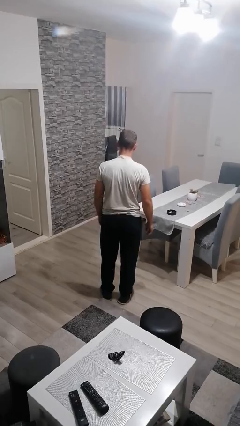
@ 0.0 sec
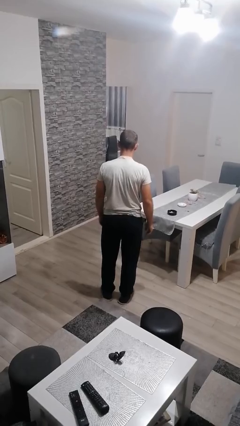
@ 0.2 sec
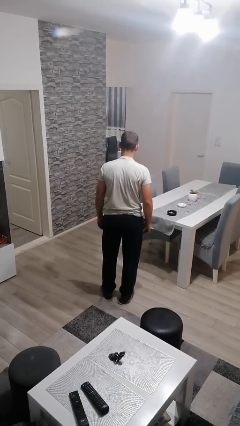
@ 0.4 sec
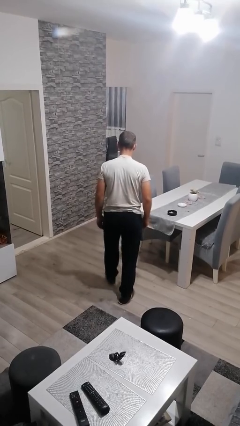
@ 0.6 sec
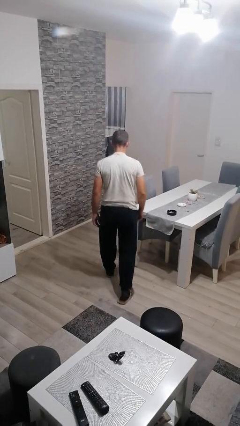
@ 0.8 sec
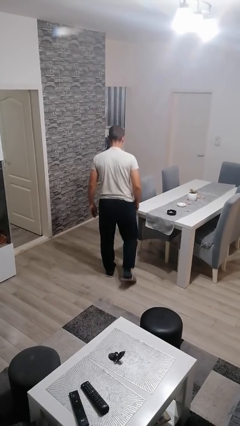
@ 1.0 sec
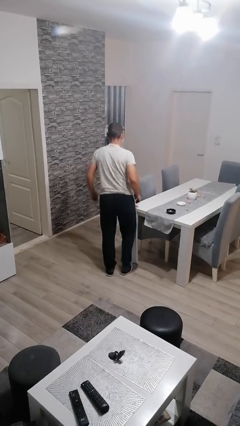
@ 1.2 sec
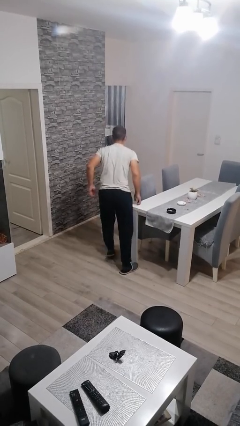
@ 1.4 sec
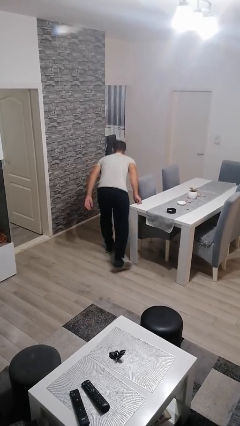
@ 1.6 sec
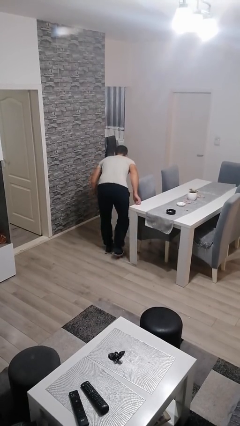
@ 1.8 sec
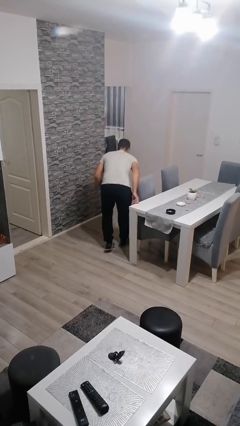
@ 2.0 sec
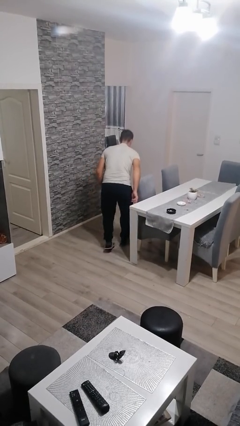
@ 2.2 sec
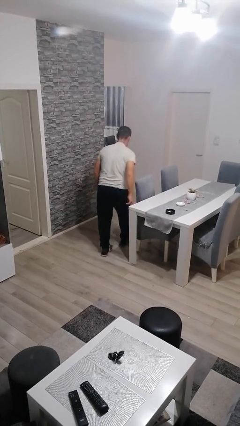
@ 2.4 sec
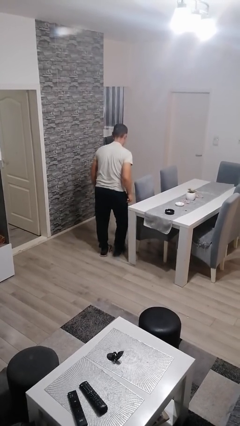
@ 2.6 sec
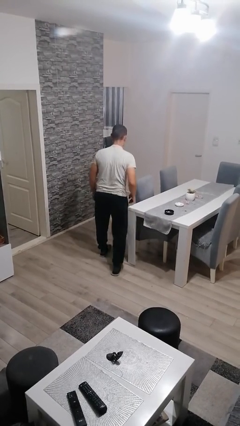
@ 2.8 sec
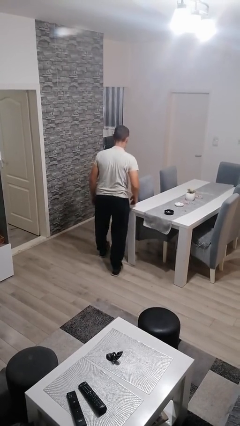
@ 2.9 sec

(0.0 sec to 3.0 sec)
person bumps into table

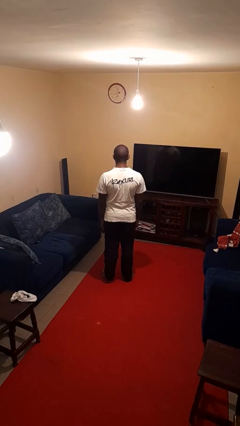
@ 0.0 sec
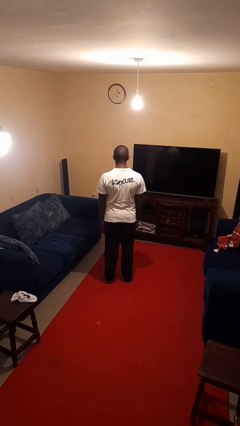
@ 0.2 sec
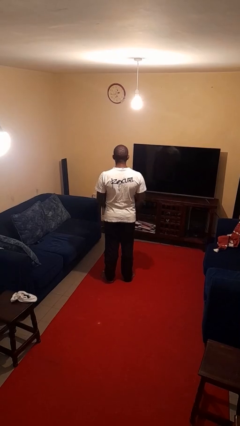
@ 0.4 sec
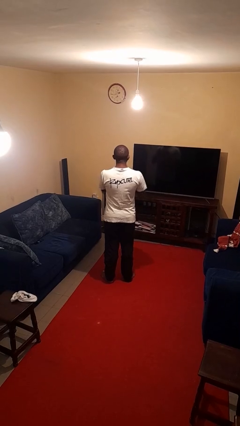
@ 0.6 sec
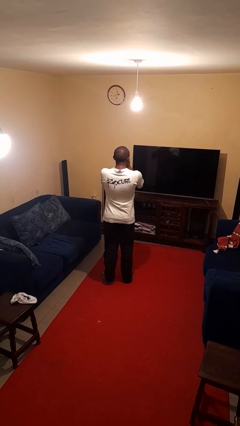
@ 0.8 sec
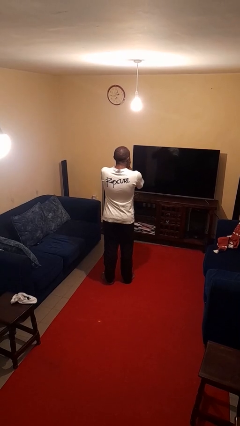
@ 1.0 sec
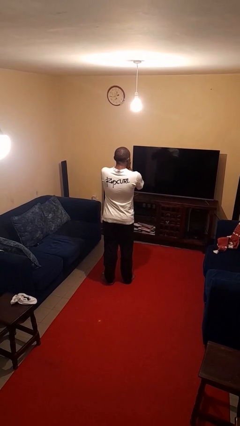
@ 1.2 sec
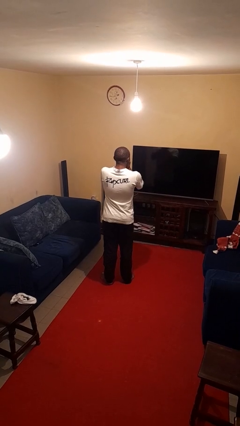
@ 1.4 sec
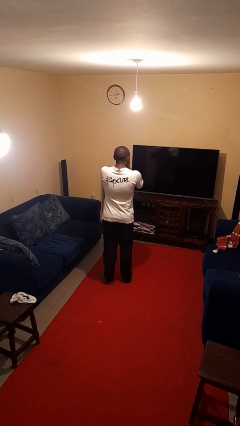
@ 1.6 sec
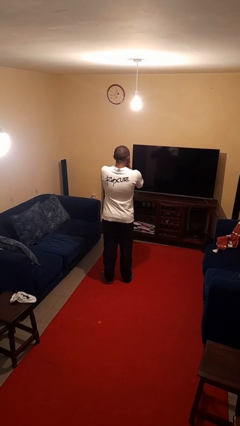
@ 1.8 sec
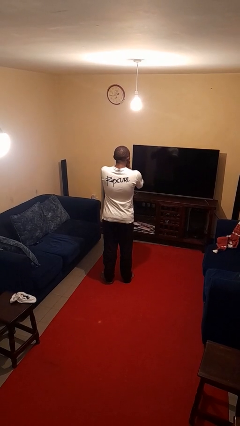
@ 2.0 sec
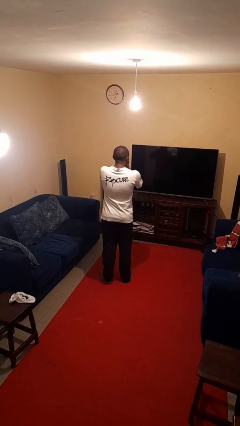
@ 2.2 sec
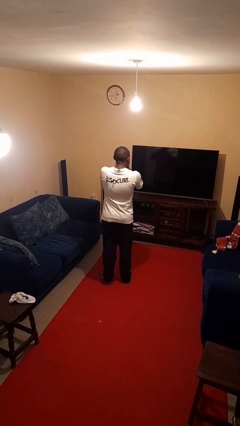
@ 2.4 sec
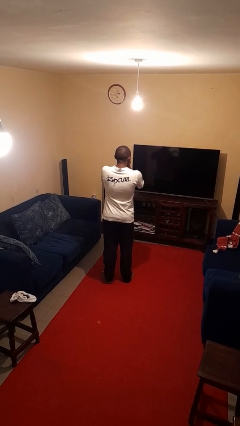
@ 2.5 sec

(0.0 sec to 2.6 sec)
person sneezes into hand

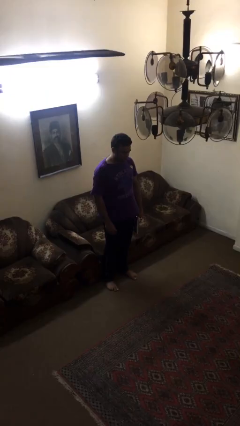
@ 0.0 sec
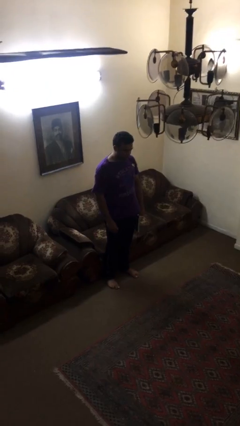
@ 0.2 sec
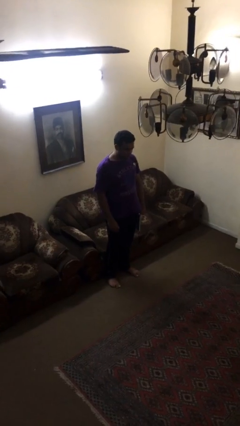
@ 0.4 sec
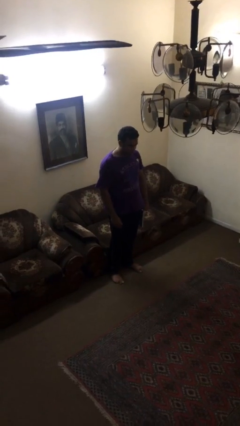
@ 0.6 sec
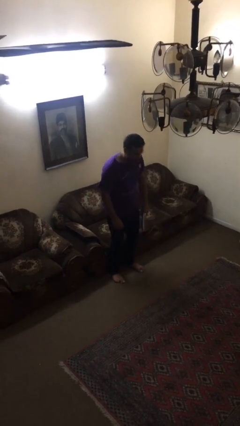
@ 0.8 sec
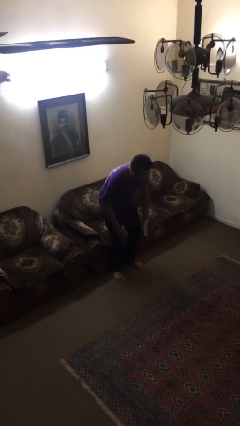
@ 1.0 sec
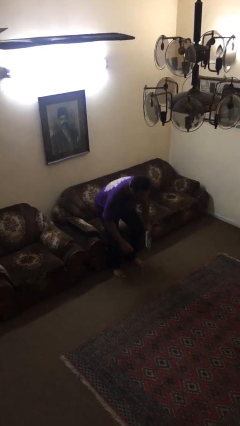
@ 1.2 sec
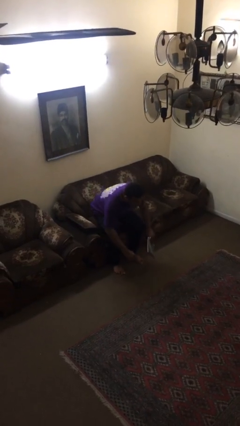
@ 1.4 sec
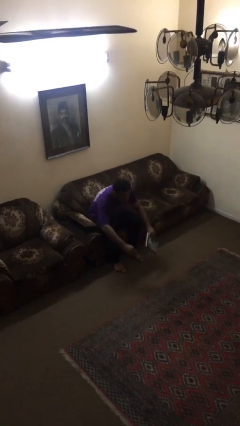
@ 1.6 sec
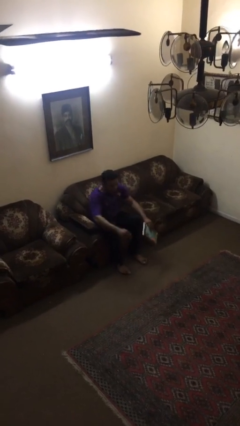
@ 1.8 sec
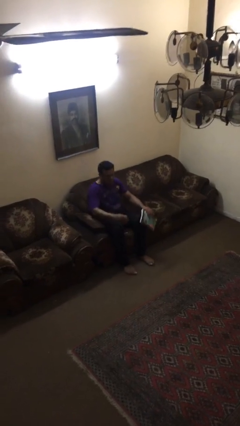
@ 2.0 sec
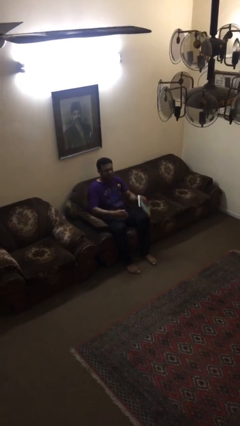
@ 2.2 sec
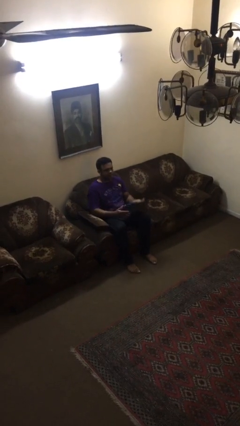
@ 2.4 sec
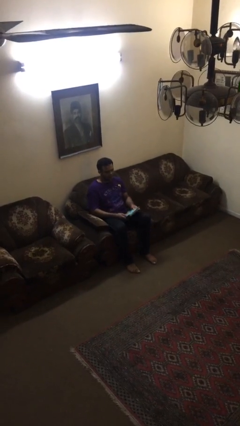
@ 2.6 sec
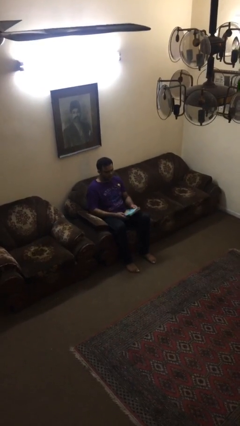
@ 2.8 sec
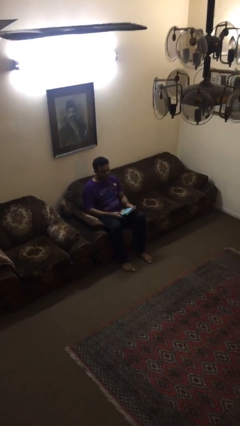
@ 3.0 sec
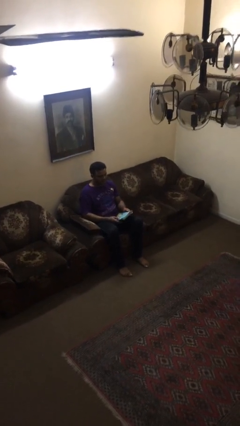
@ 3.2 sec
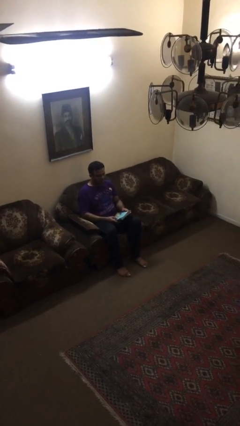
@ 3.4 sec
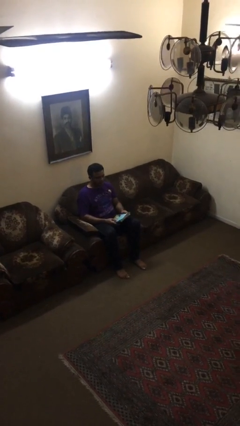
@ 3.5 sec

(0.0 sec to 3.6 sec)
person sits down

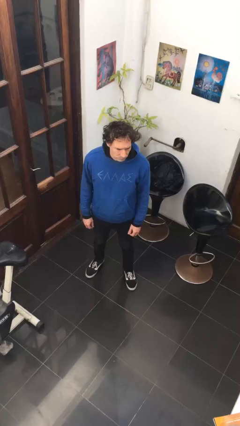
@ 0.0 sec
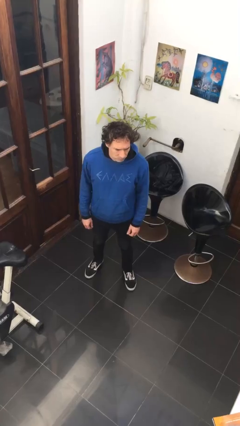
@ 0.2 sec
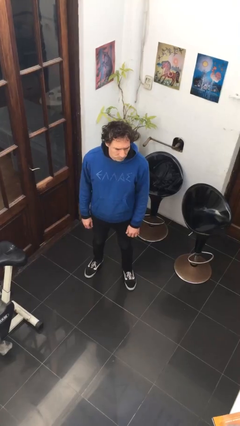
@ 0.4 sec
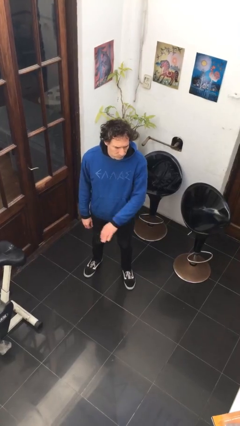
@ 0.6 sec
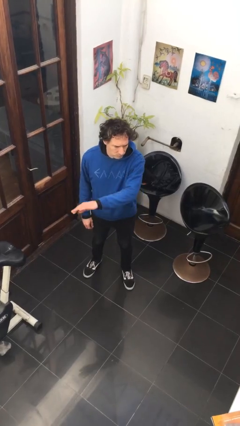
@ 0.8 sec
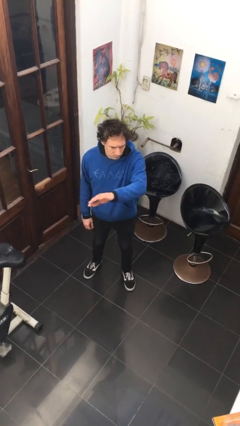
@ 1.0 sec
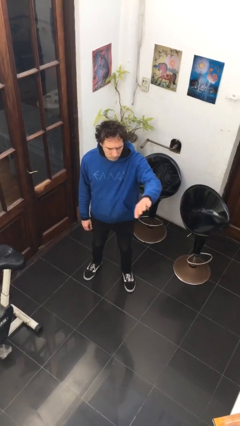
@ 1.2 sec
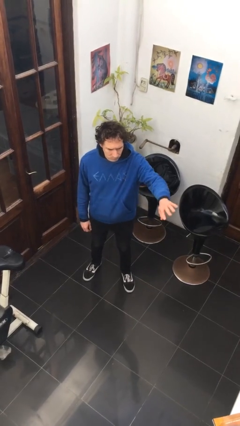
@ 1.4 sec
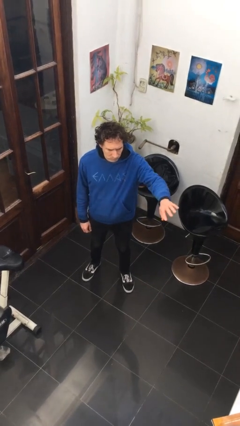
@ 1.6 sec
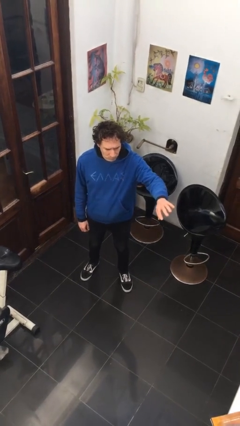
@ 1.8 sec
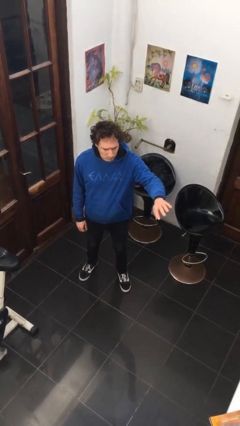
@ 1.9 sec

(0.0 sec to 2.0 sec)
person gestures swipe left

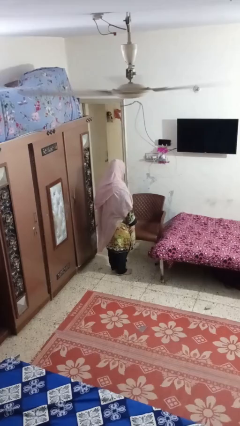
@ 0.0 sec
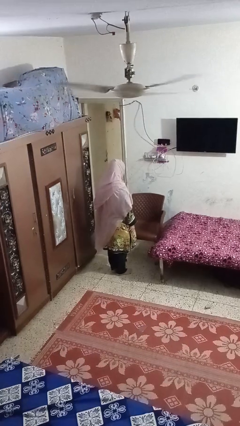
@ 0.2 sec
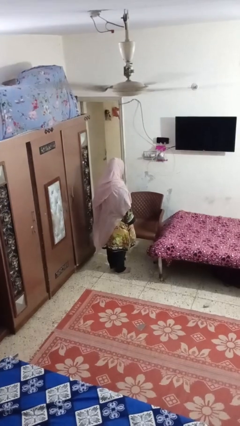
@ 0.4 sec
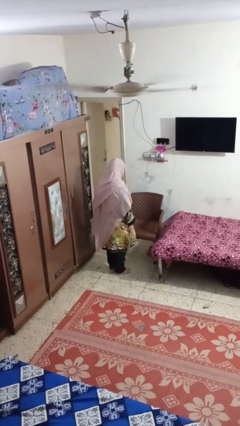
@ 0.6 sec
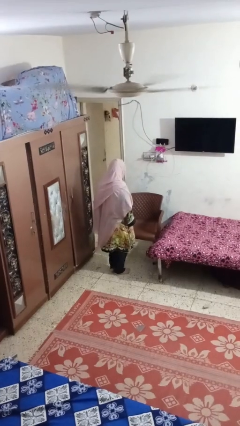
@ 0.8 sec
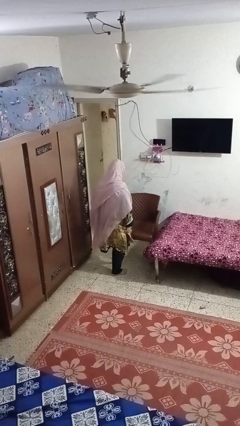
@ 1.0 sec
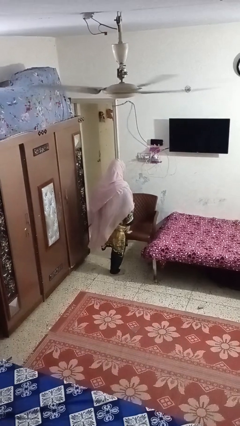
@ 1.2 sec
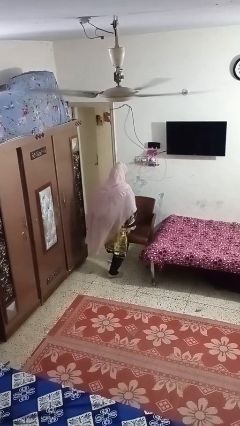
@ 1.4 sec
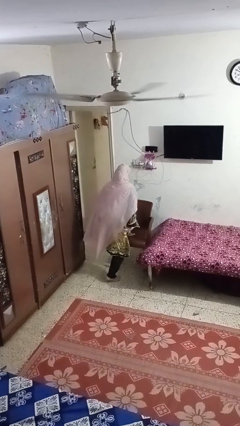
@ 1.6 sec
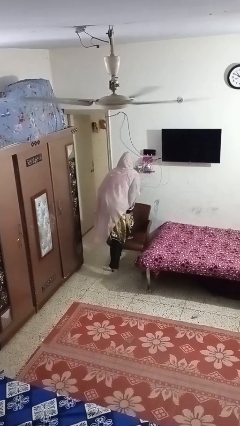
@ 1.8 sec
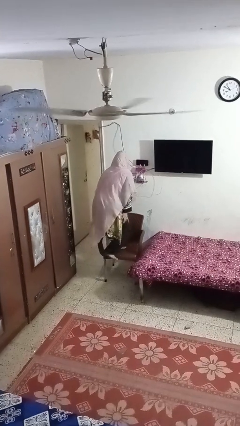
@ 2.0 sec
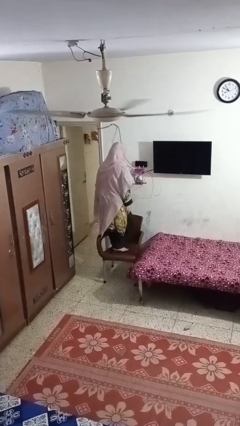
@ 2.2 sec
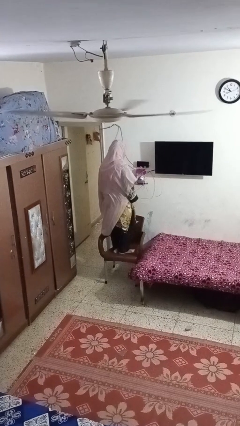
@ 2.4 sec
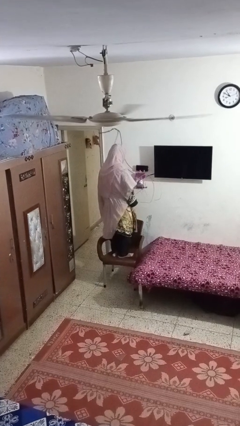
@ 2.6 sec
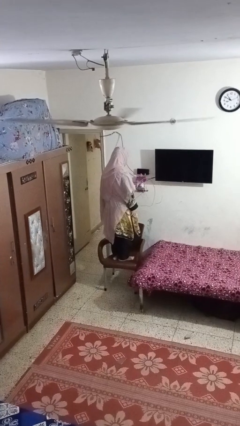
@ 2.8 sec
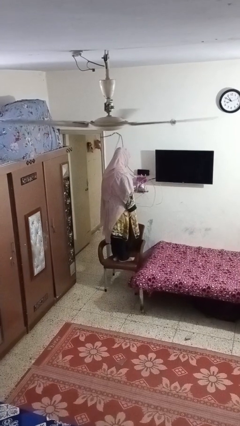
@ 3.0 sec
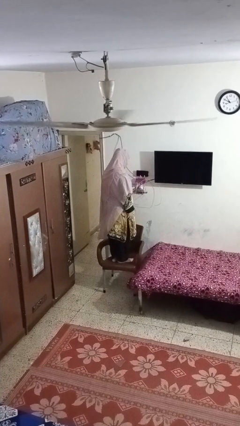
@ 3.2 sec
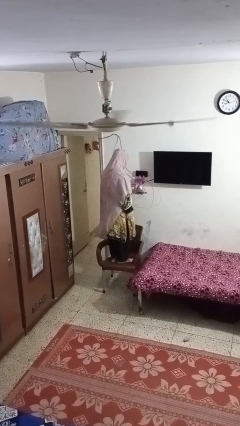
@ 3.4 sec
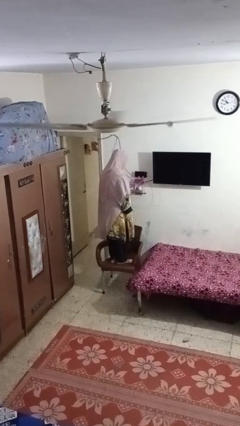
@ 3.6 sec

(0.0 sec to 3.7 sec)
person climbs on chair

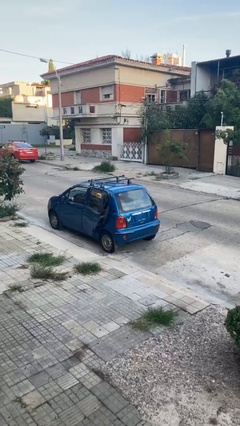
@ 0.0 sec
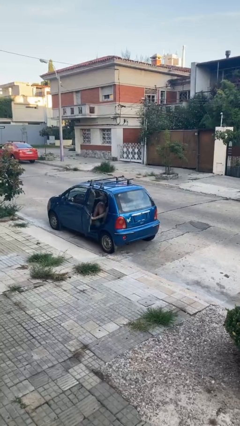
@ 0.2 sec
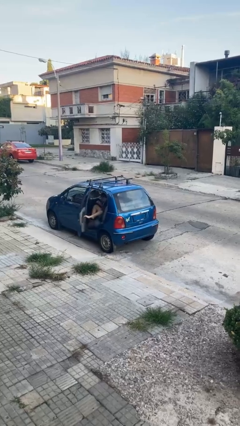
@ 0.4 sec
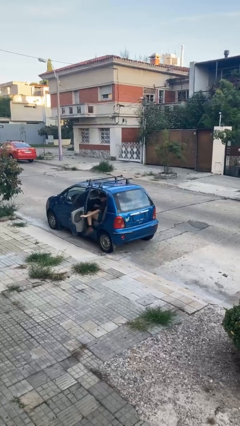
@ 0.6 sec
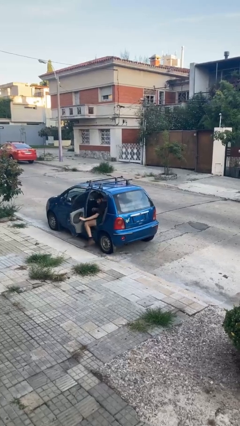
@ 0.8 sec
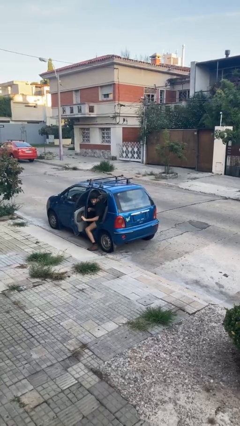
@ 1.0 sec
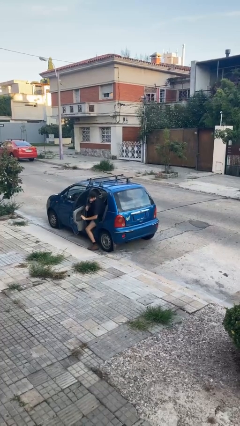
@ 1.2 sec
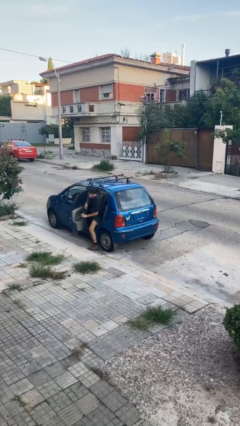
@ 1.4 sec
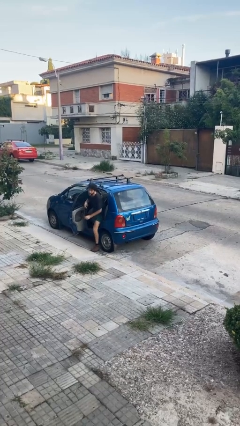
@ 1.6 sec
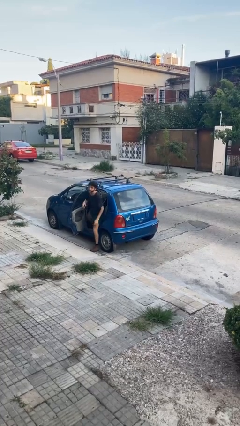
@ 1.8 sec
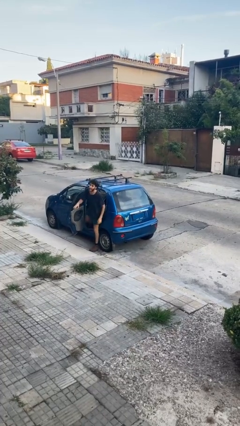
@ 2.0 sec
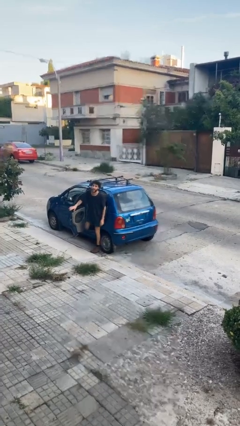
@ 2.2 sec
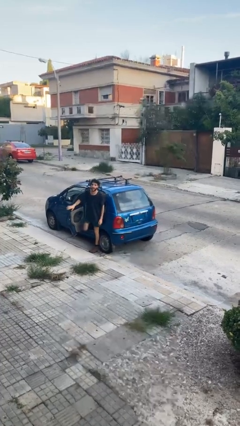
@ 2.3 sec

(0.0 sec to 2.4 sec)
car drops off person
